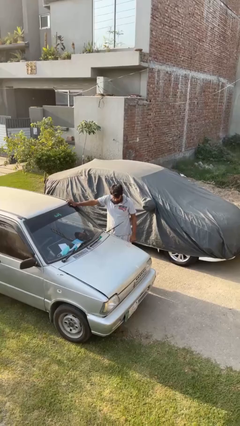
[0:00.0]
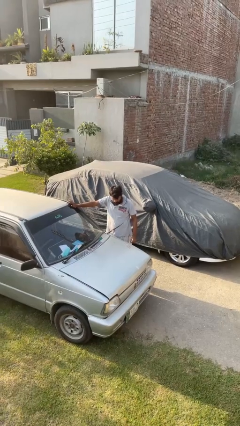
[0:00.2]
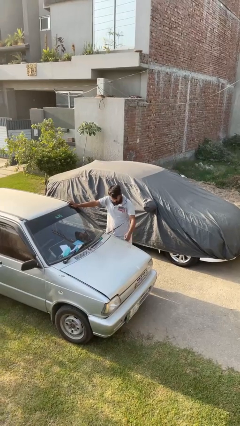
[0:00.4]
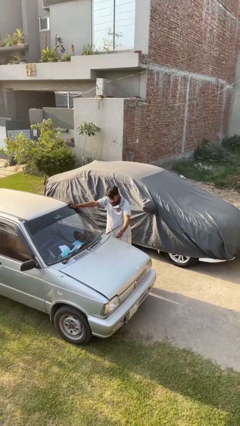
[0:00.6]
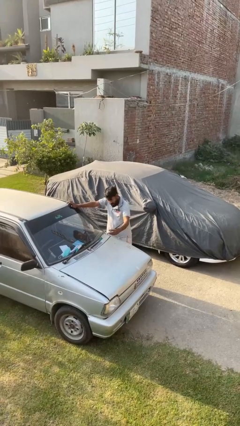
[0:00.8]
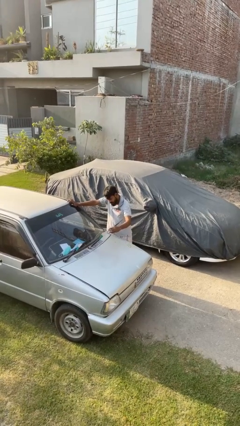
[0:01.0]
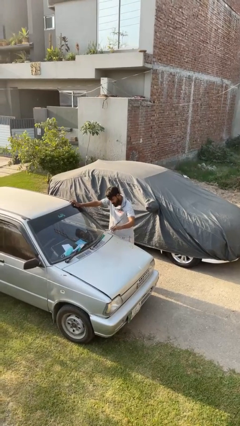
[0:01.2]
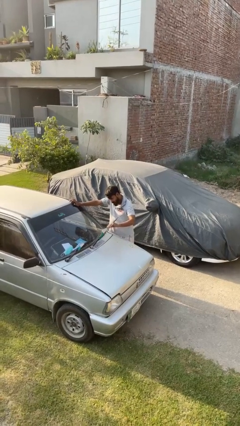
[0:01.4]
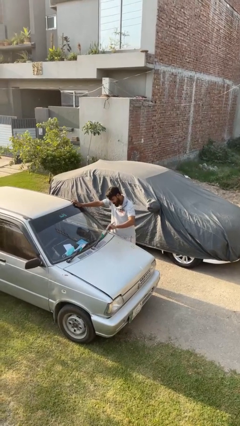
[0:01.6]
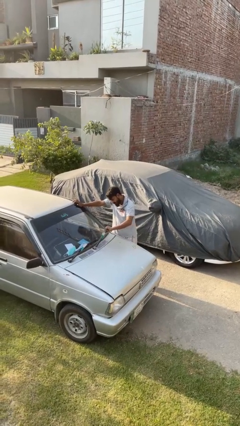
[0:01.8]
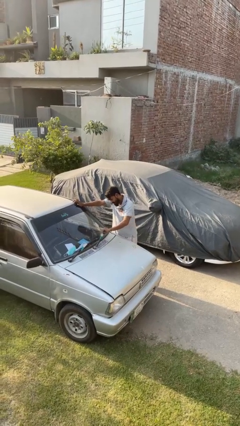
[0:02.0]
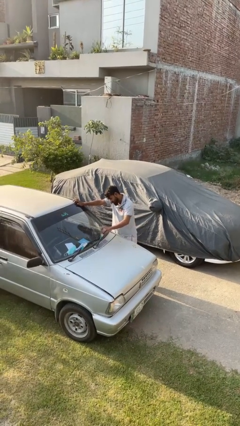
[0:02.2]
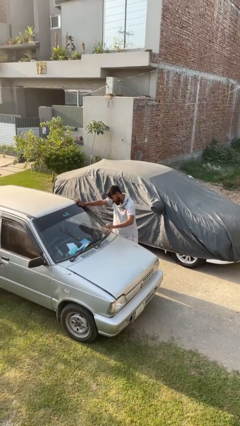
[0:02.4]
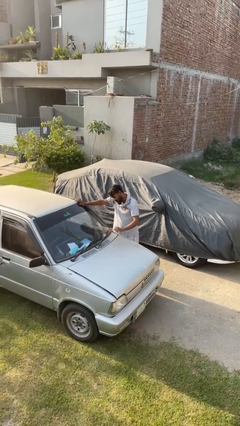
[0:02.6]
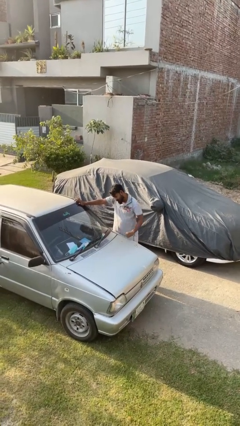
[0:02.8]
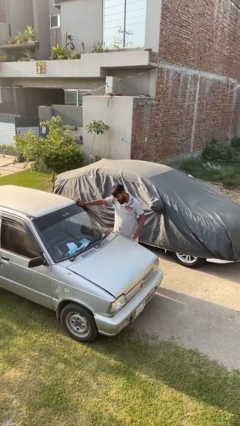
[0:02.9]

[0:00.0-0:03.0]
person flips down car wipers

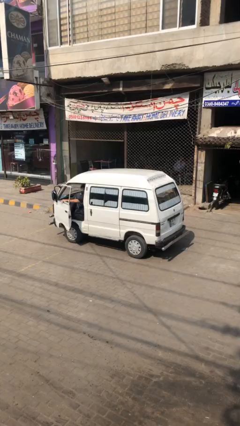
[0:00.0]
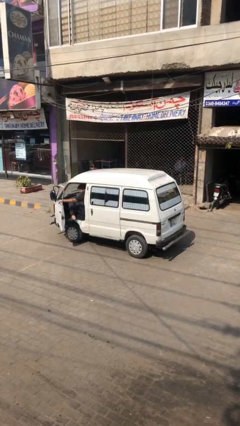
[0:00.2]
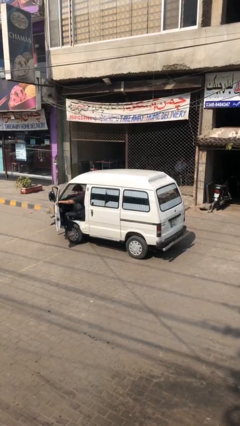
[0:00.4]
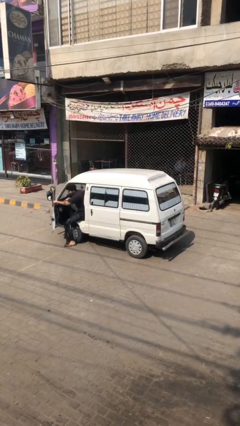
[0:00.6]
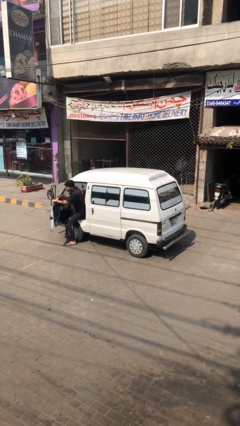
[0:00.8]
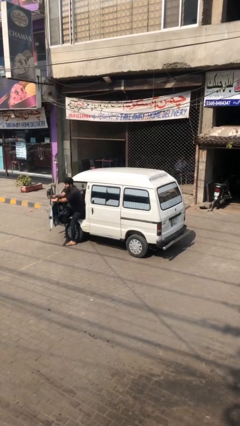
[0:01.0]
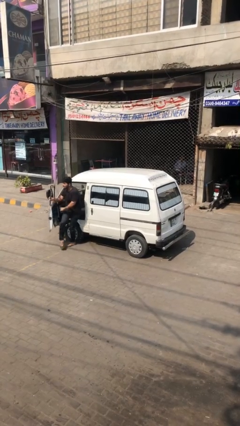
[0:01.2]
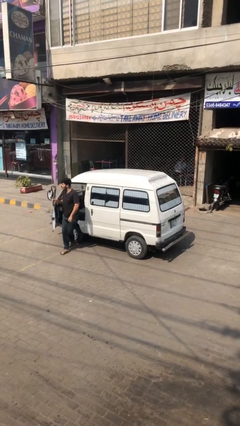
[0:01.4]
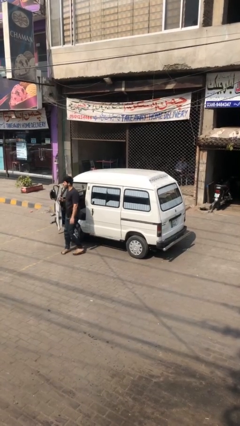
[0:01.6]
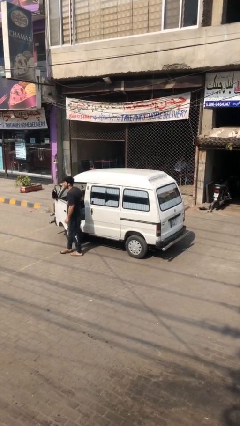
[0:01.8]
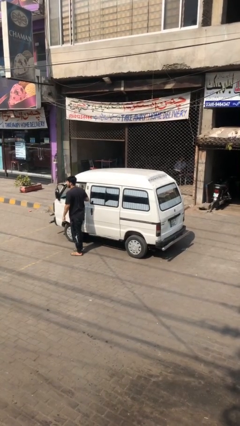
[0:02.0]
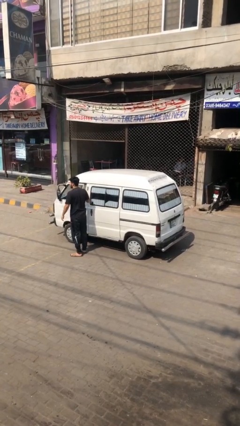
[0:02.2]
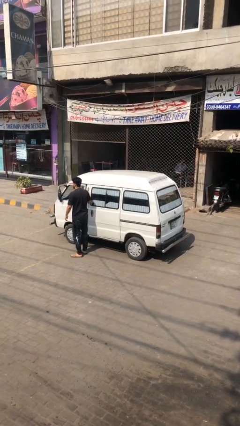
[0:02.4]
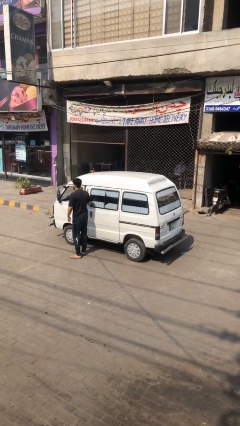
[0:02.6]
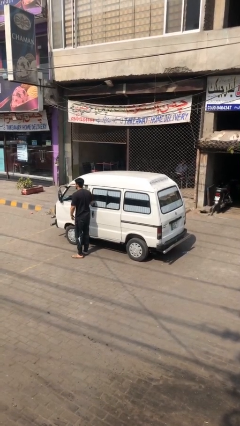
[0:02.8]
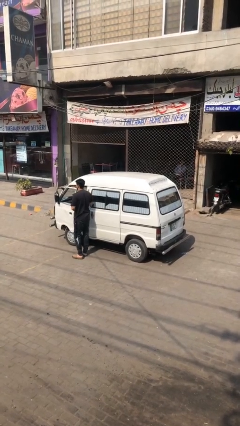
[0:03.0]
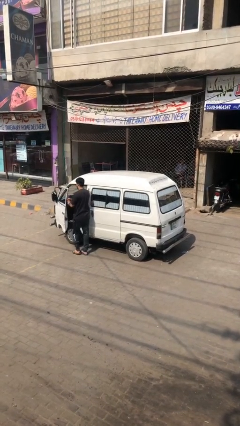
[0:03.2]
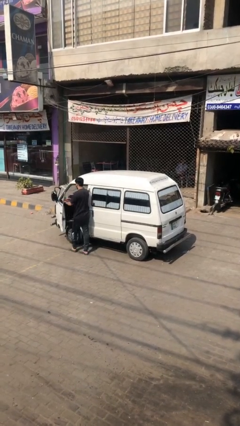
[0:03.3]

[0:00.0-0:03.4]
car drops off person

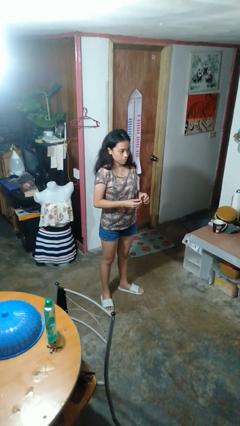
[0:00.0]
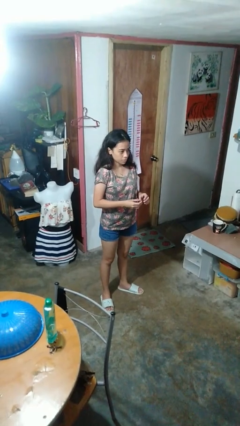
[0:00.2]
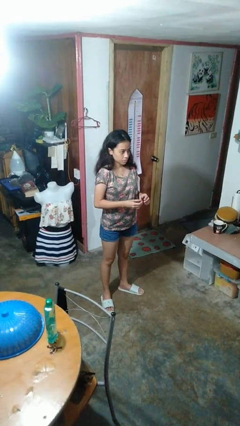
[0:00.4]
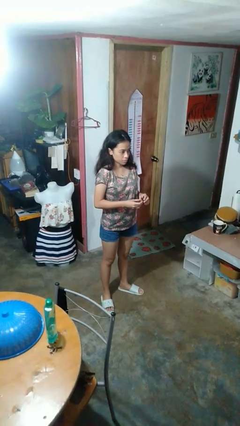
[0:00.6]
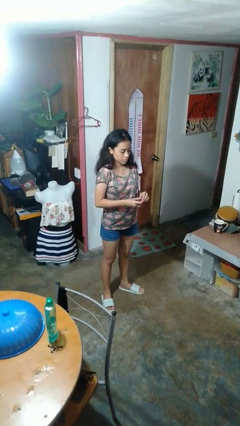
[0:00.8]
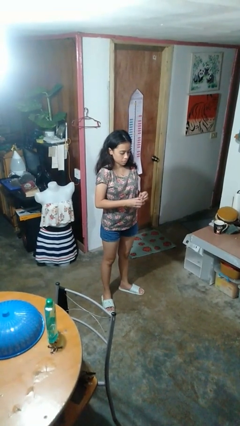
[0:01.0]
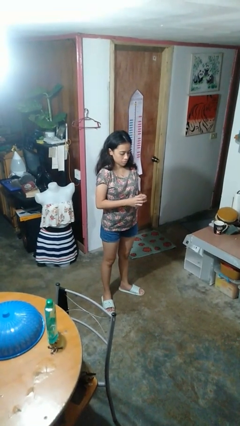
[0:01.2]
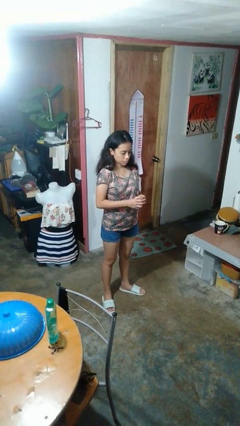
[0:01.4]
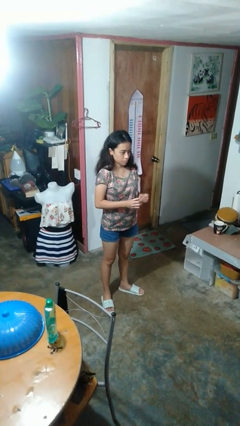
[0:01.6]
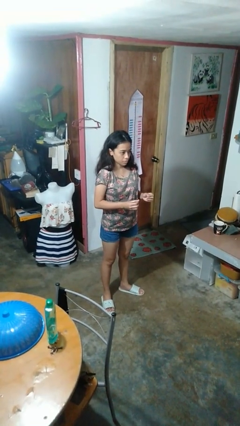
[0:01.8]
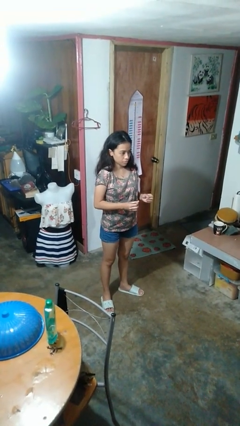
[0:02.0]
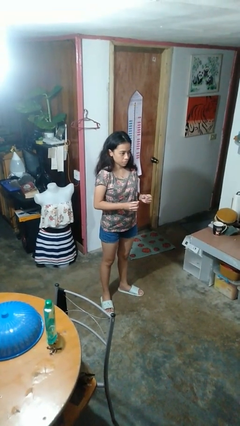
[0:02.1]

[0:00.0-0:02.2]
person puts on ring

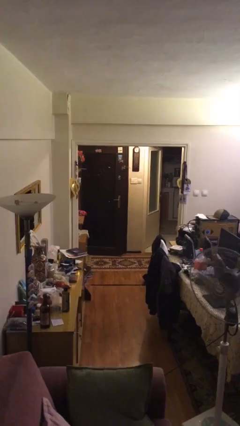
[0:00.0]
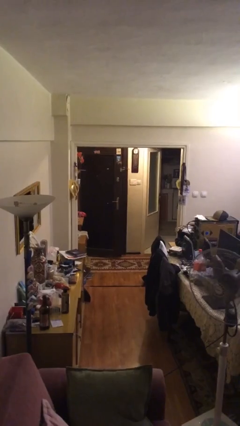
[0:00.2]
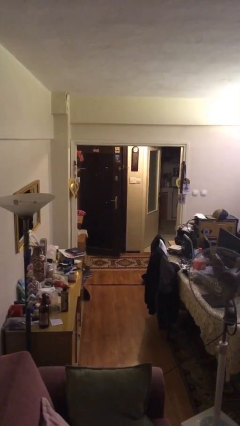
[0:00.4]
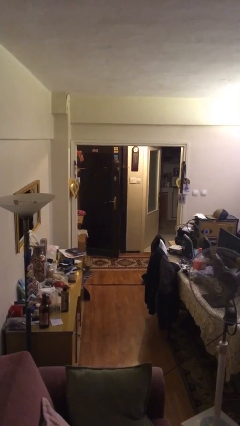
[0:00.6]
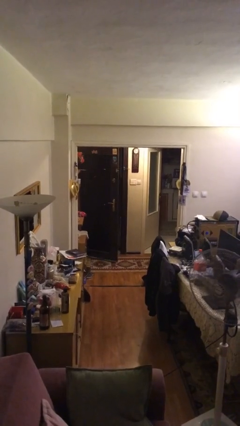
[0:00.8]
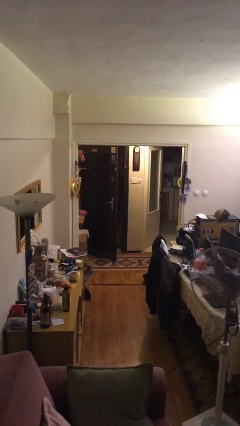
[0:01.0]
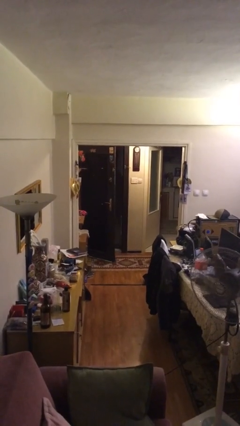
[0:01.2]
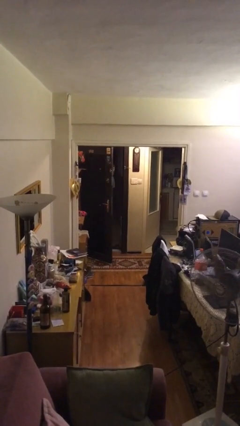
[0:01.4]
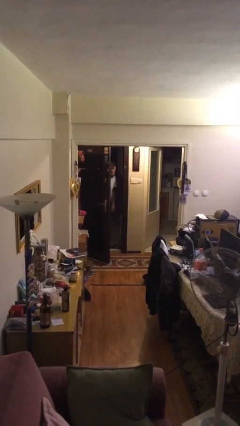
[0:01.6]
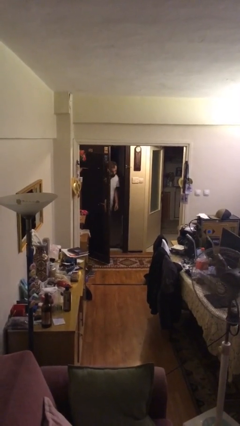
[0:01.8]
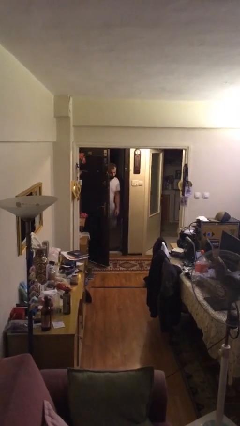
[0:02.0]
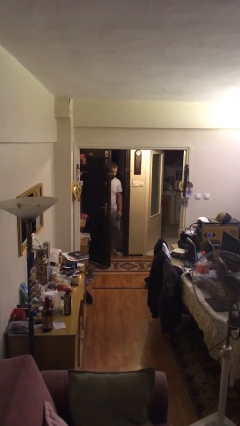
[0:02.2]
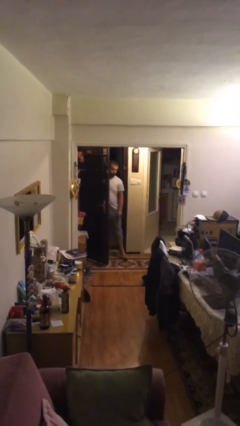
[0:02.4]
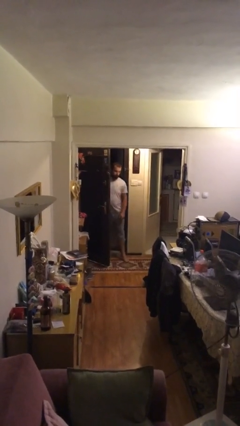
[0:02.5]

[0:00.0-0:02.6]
person opens facility door

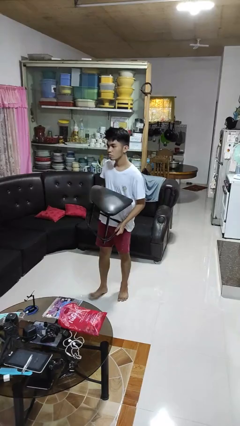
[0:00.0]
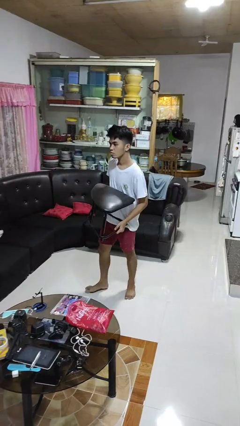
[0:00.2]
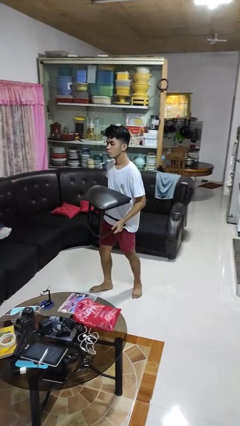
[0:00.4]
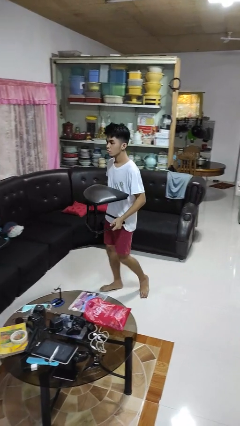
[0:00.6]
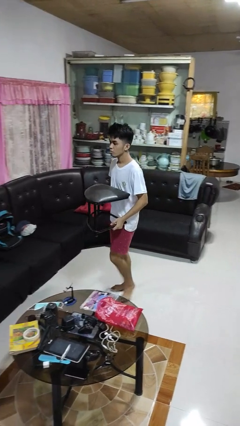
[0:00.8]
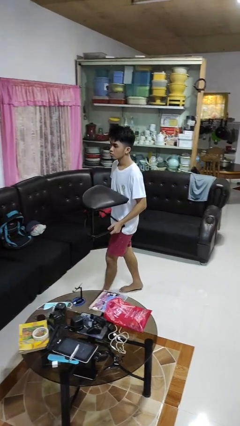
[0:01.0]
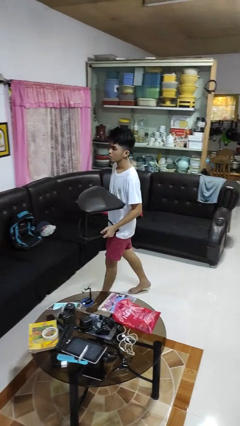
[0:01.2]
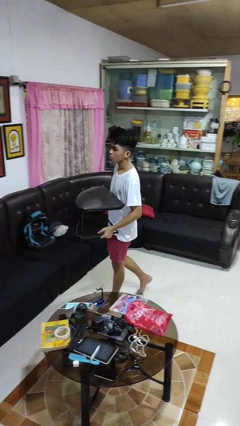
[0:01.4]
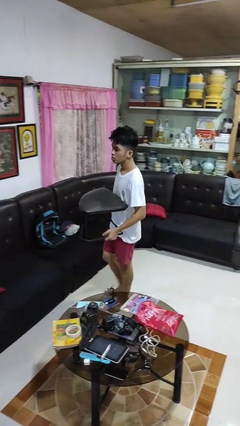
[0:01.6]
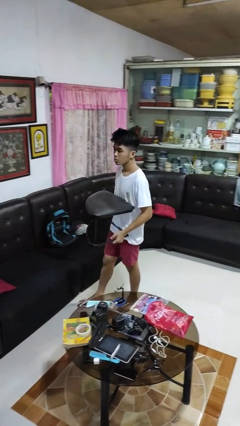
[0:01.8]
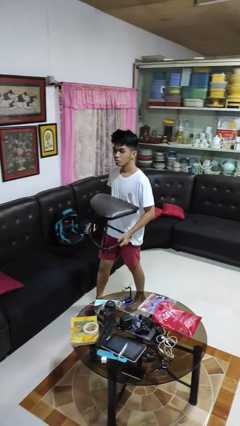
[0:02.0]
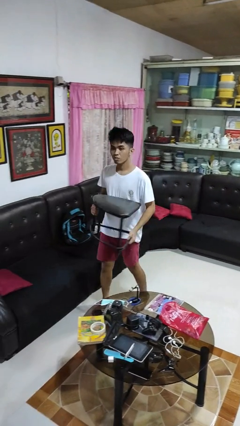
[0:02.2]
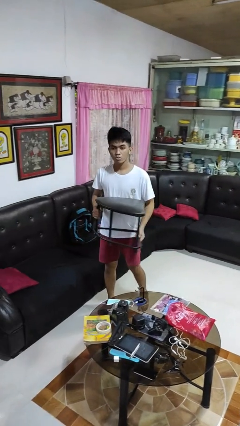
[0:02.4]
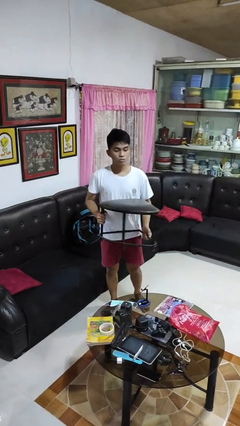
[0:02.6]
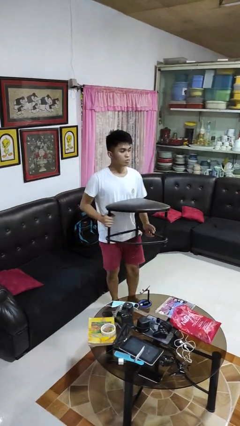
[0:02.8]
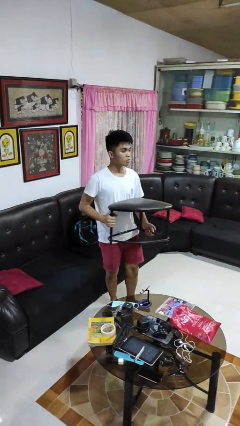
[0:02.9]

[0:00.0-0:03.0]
person carries furniture

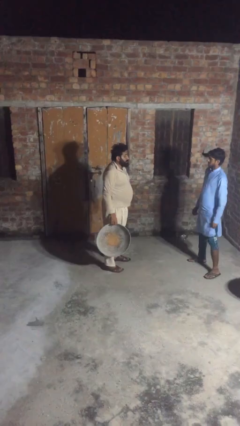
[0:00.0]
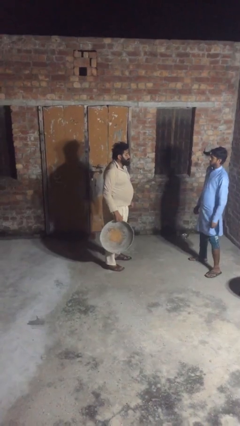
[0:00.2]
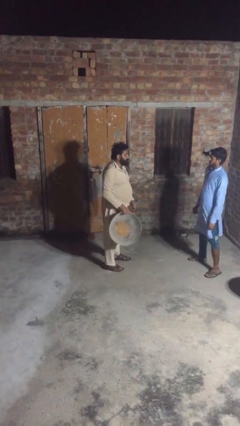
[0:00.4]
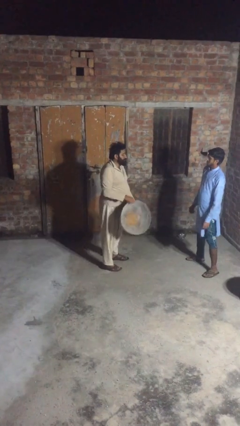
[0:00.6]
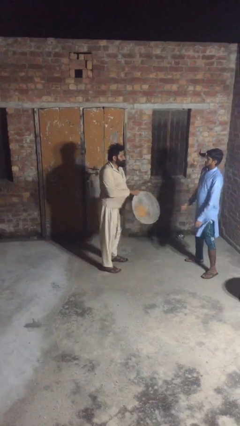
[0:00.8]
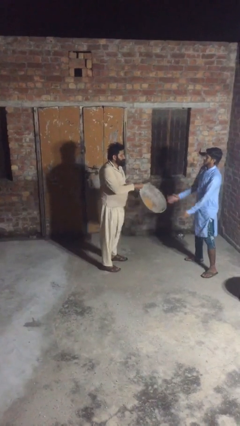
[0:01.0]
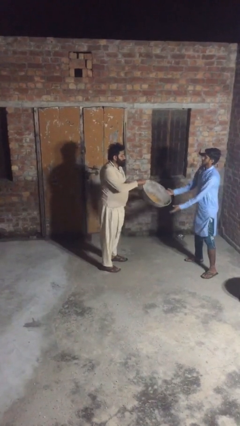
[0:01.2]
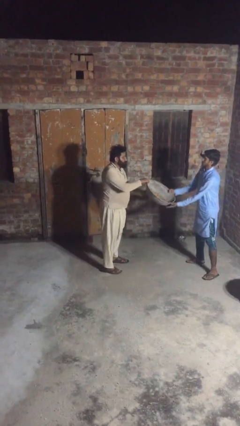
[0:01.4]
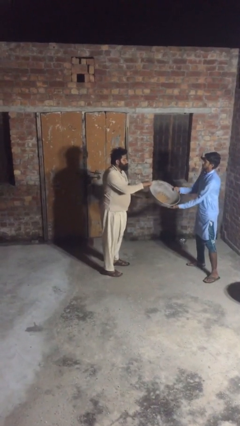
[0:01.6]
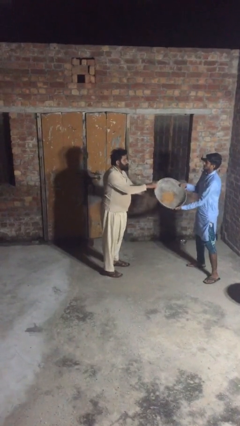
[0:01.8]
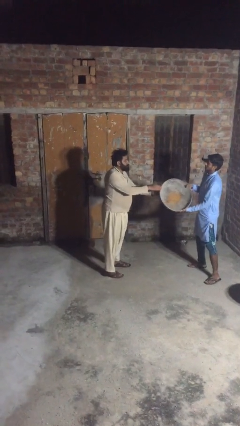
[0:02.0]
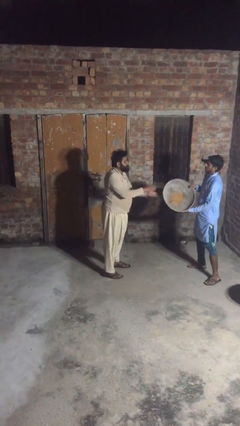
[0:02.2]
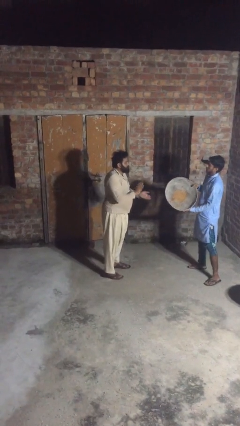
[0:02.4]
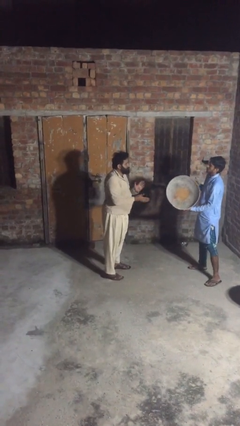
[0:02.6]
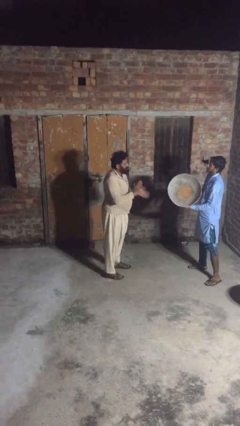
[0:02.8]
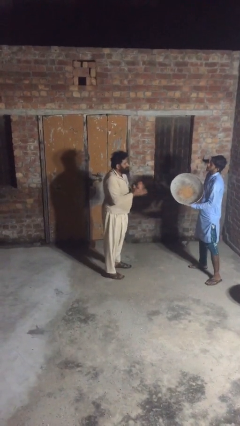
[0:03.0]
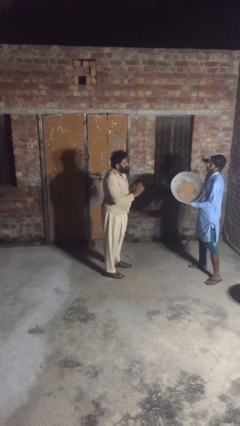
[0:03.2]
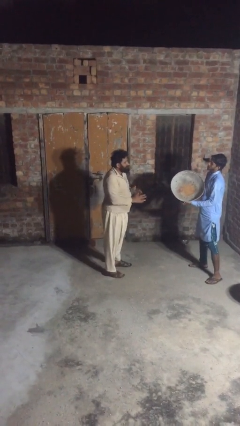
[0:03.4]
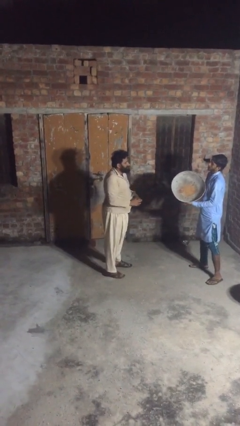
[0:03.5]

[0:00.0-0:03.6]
person transfers object to person
